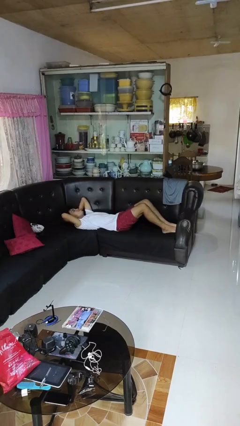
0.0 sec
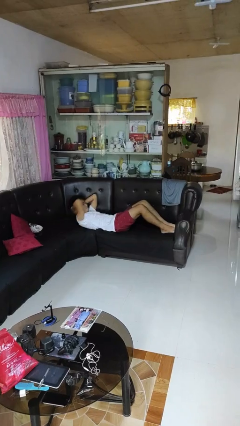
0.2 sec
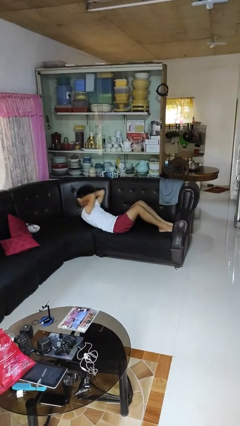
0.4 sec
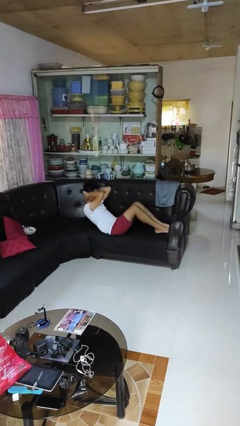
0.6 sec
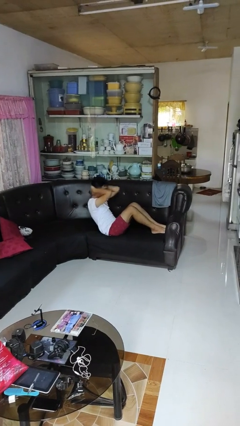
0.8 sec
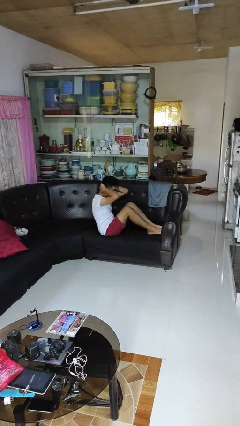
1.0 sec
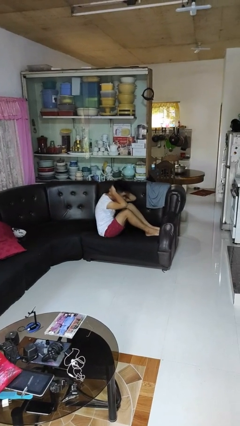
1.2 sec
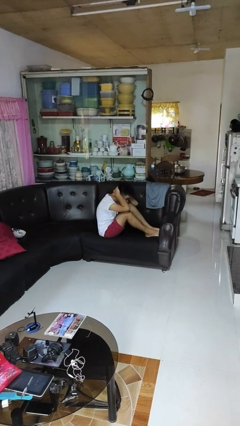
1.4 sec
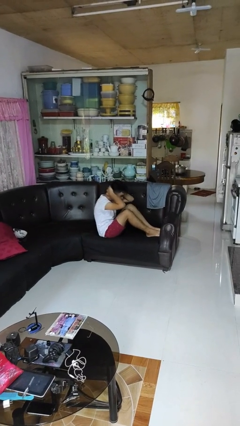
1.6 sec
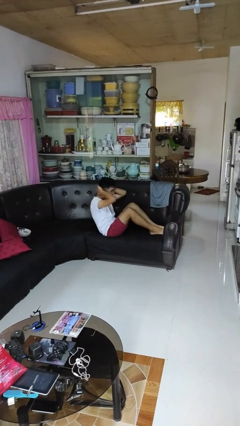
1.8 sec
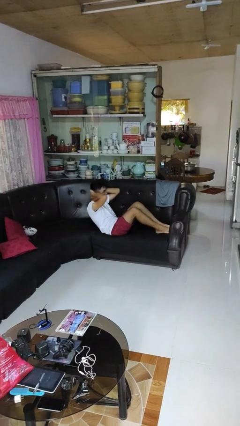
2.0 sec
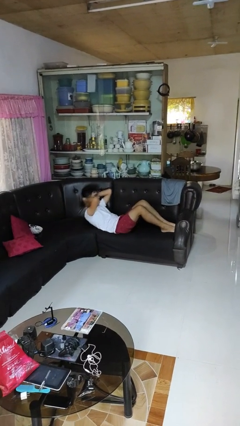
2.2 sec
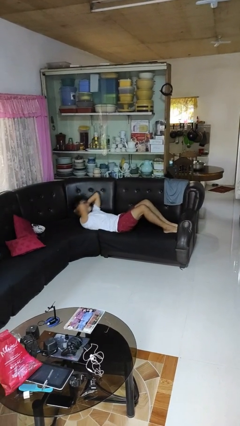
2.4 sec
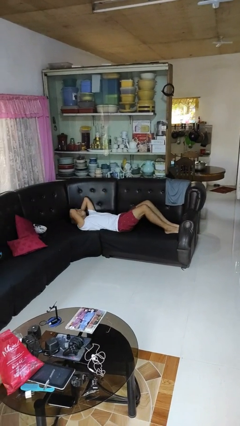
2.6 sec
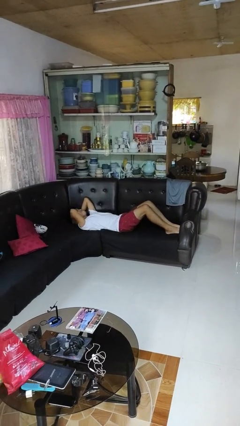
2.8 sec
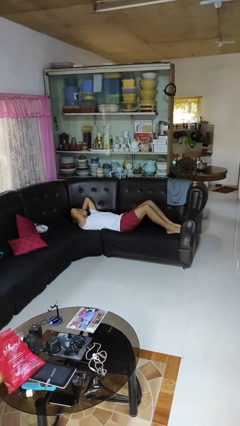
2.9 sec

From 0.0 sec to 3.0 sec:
person exercises with situp

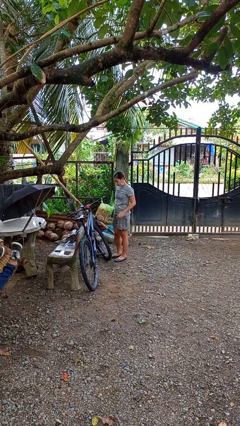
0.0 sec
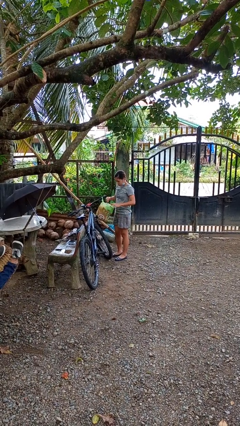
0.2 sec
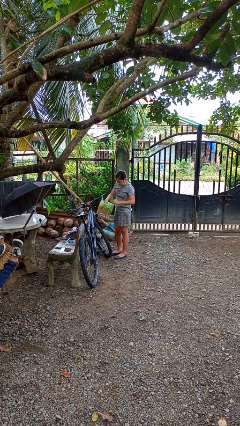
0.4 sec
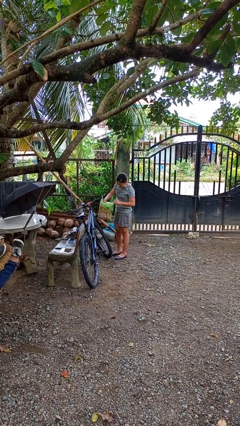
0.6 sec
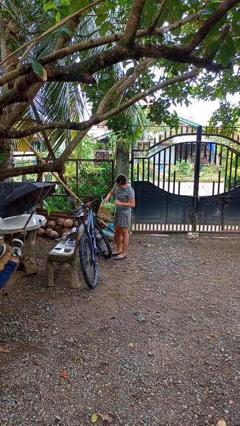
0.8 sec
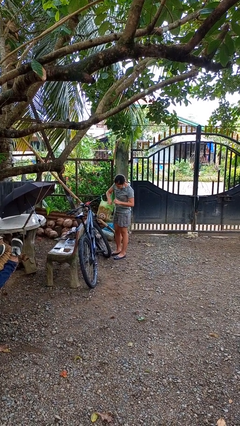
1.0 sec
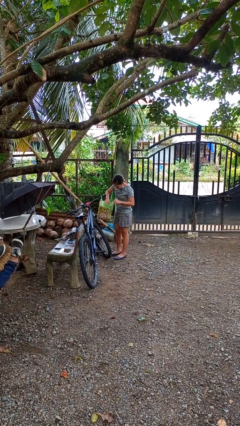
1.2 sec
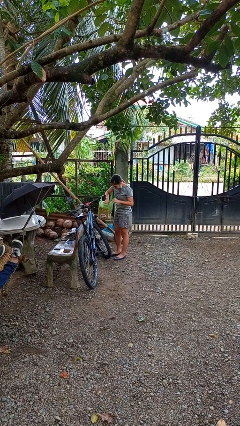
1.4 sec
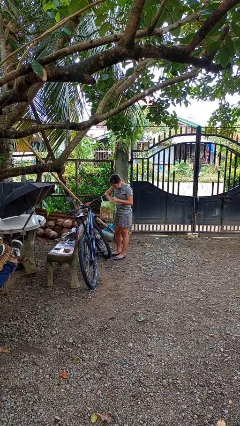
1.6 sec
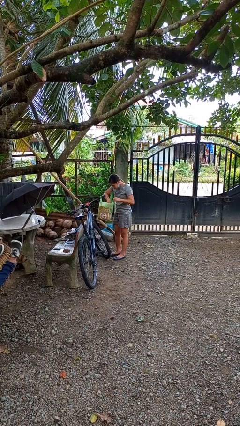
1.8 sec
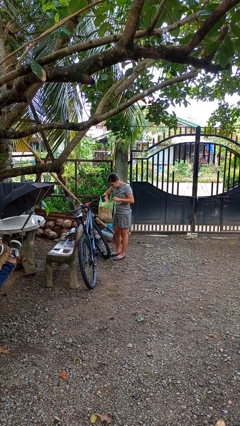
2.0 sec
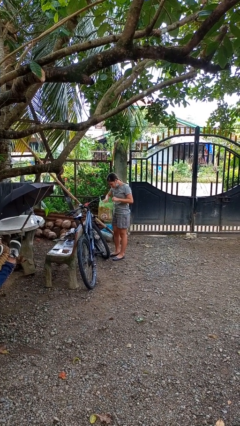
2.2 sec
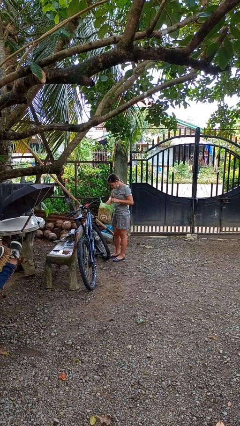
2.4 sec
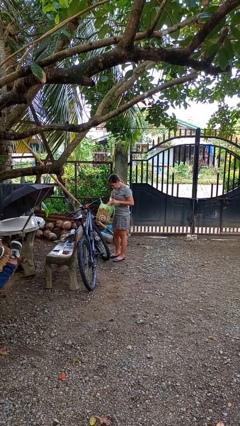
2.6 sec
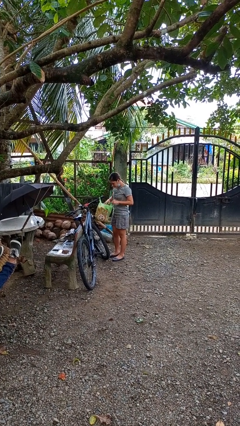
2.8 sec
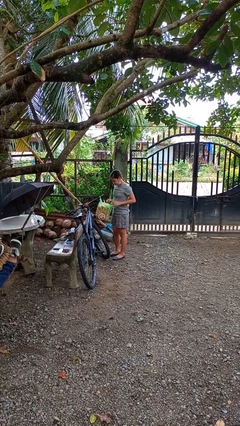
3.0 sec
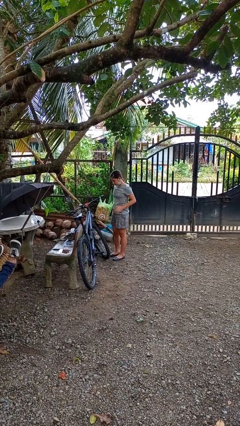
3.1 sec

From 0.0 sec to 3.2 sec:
person searches in bag

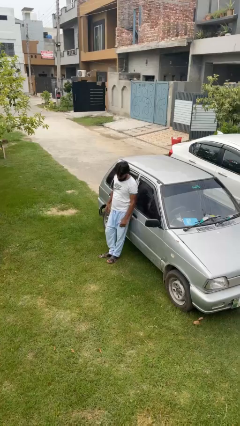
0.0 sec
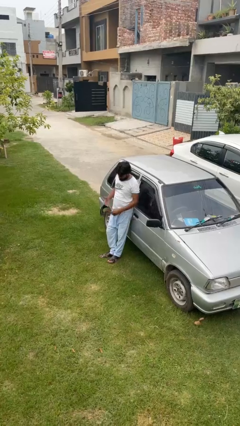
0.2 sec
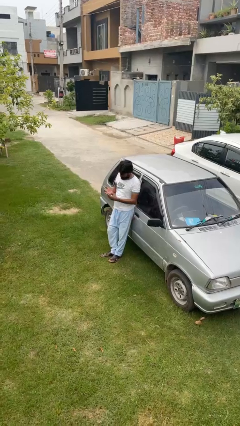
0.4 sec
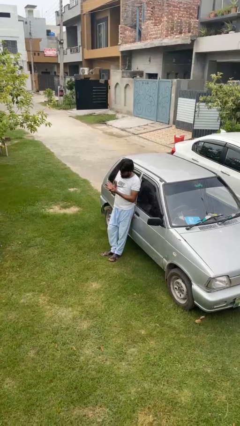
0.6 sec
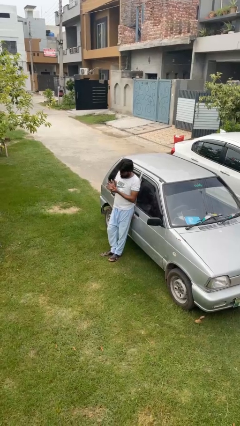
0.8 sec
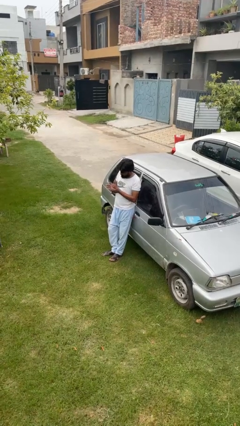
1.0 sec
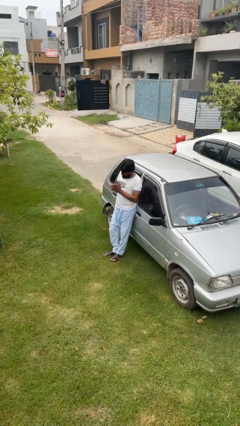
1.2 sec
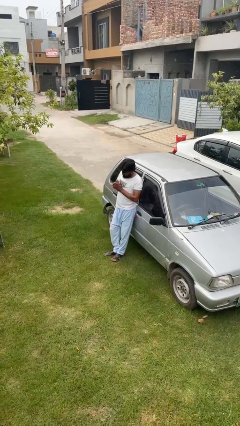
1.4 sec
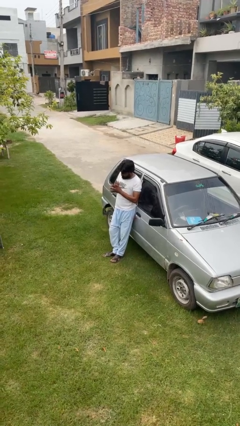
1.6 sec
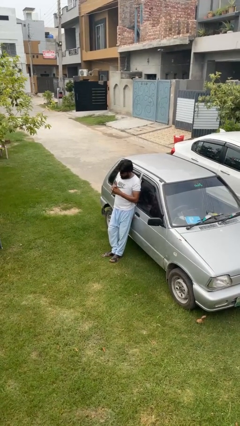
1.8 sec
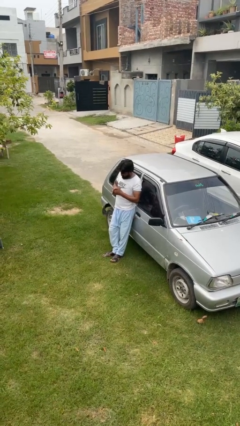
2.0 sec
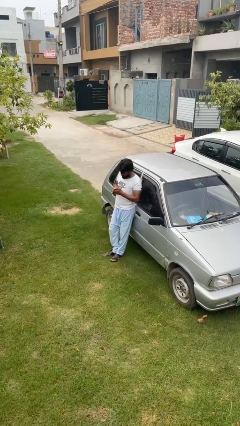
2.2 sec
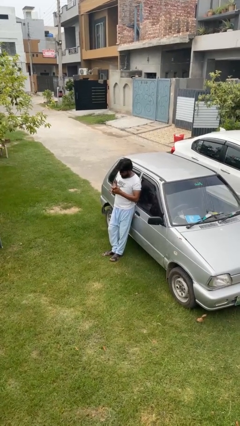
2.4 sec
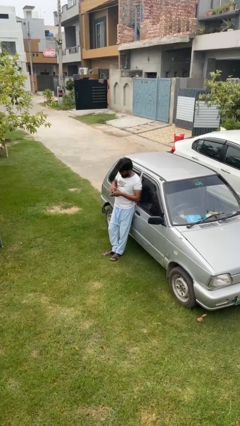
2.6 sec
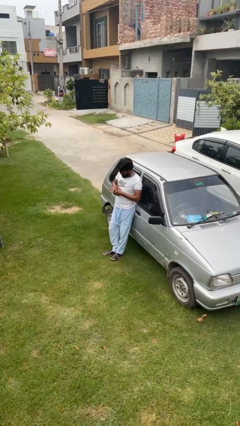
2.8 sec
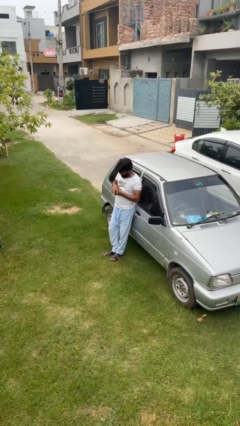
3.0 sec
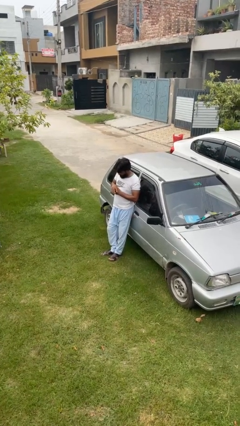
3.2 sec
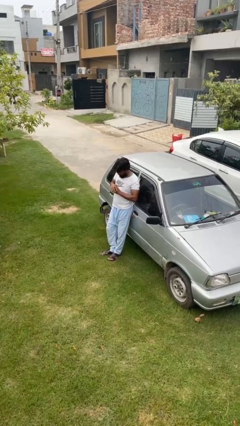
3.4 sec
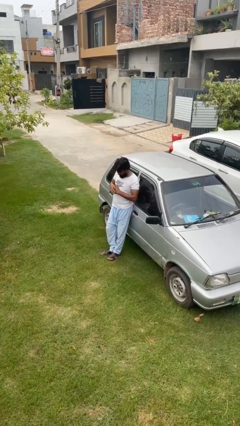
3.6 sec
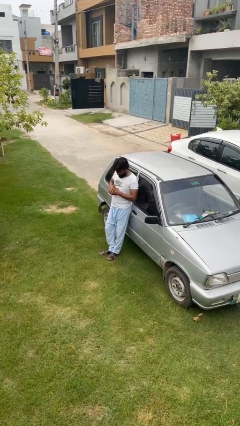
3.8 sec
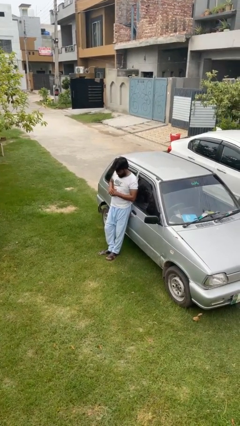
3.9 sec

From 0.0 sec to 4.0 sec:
person cracks knuckles

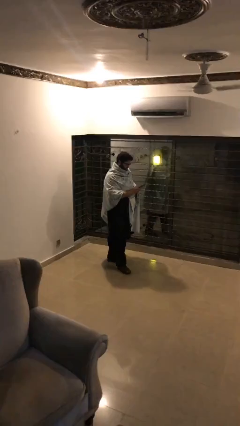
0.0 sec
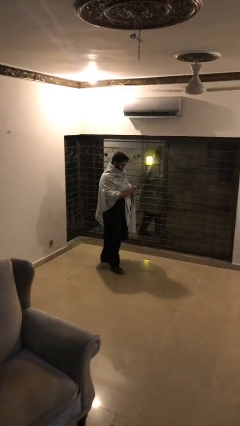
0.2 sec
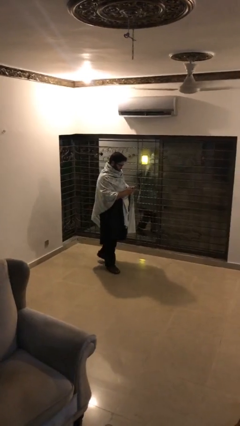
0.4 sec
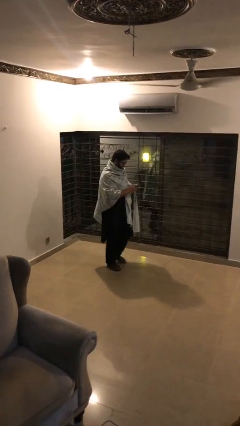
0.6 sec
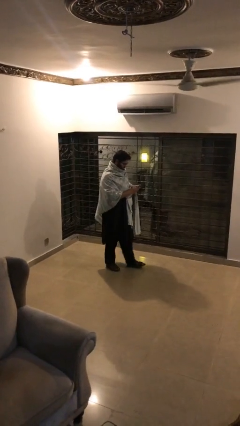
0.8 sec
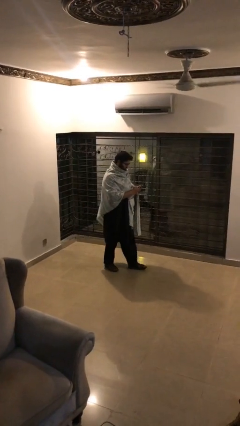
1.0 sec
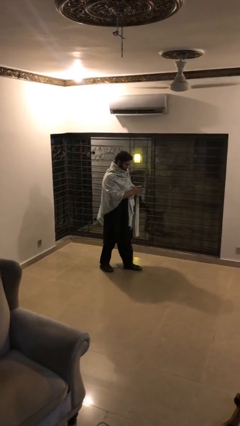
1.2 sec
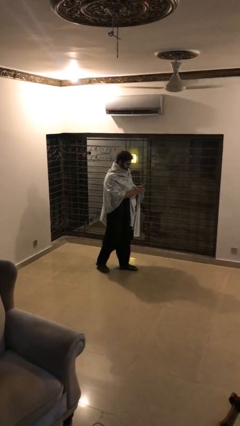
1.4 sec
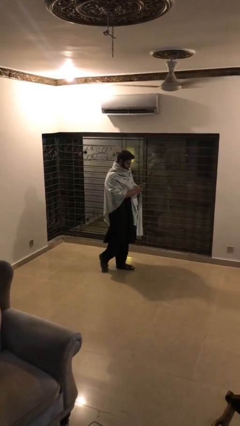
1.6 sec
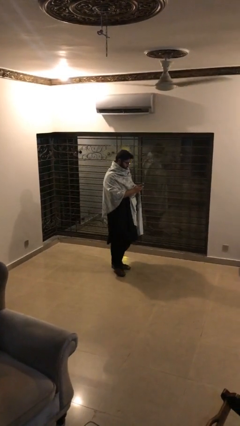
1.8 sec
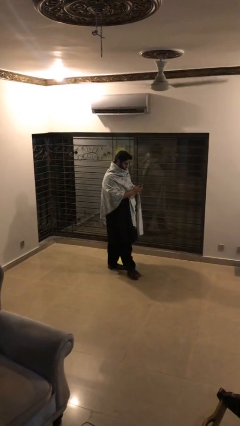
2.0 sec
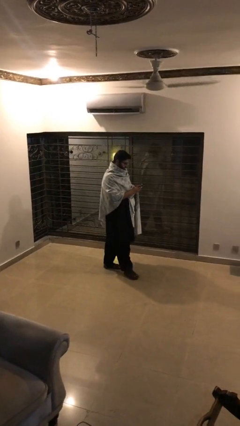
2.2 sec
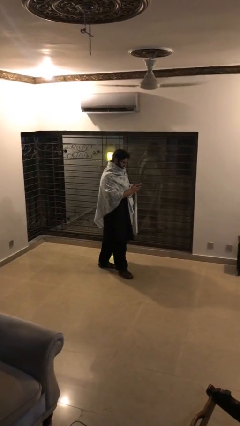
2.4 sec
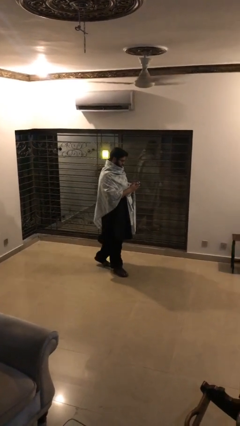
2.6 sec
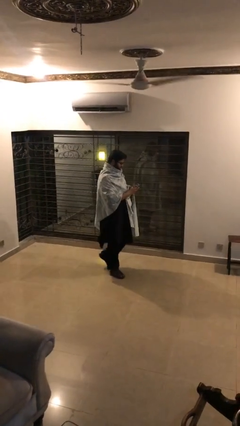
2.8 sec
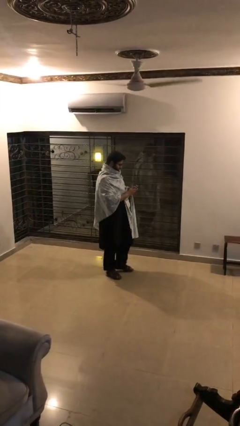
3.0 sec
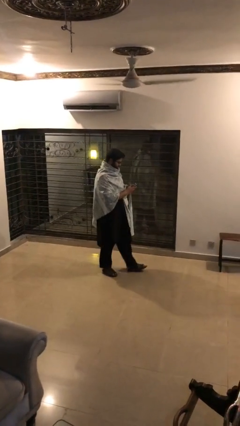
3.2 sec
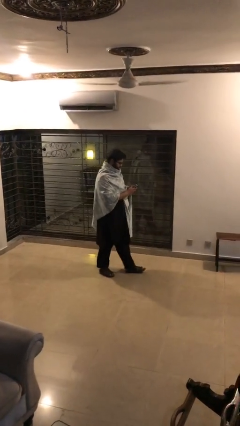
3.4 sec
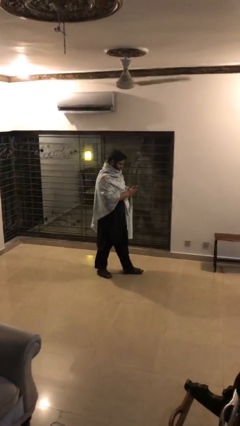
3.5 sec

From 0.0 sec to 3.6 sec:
person texts on phone

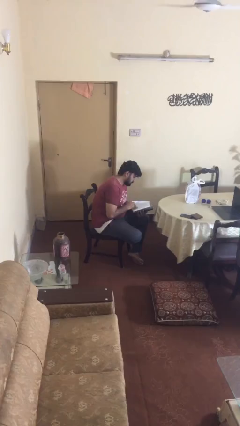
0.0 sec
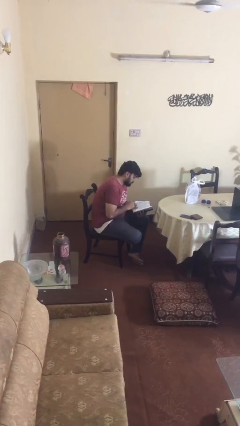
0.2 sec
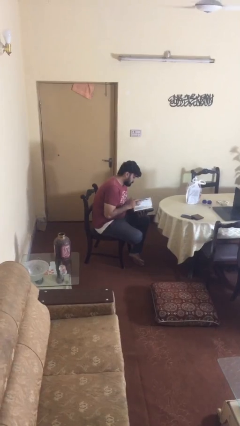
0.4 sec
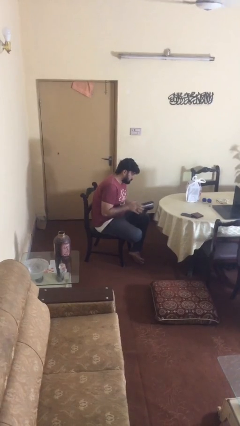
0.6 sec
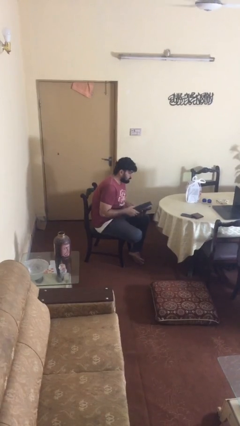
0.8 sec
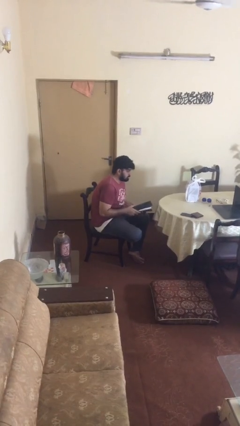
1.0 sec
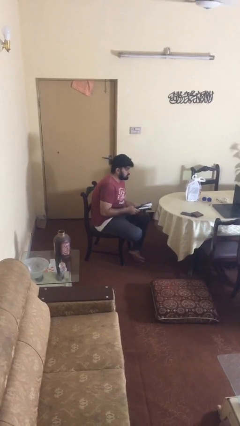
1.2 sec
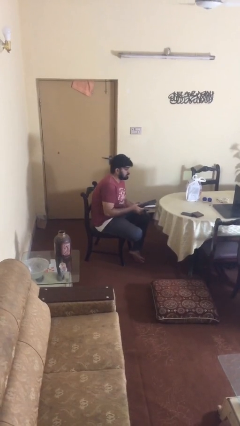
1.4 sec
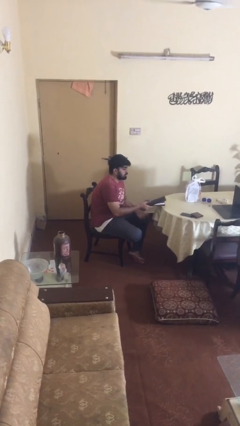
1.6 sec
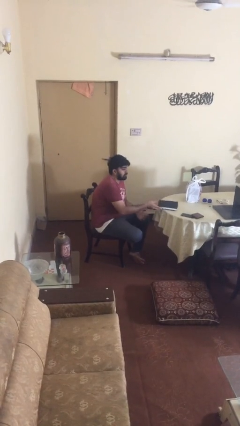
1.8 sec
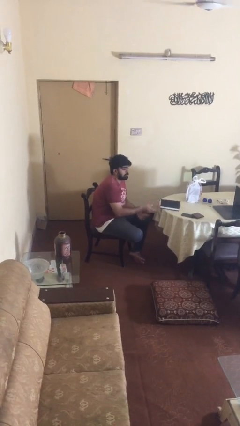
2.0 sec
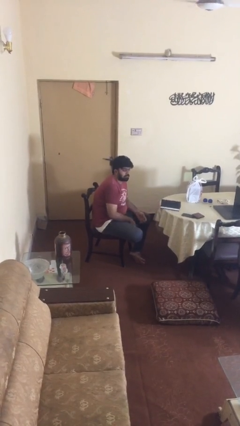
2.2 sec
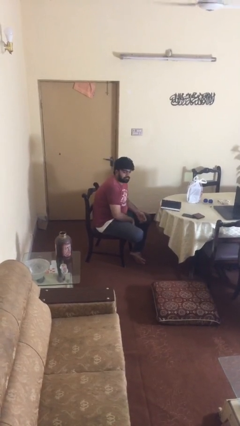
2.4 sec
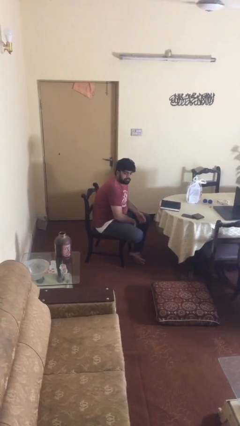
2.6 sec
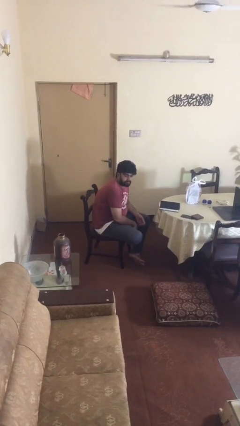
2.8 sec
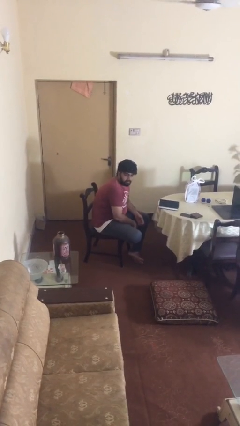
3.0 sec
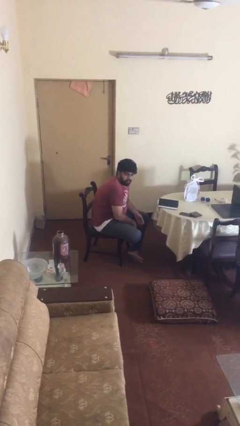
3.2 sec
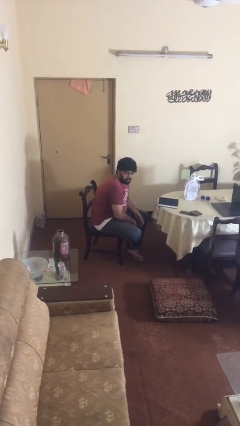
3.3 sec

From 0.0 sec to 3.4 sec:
person puts down object on table

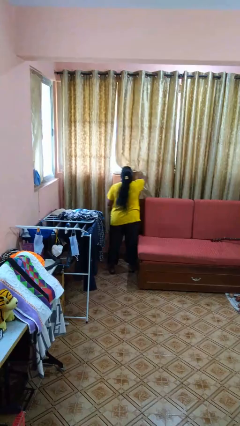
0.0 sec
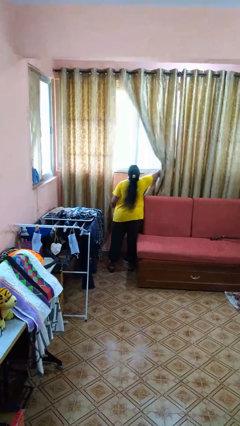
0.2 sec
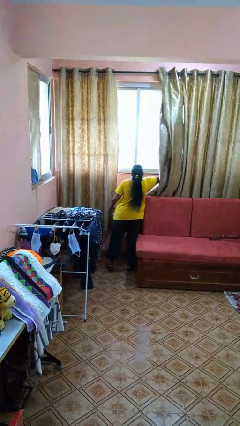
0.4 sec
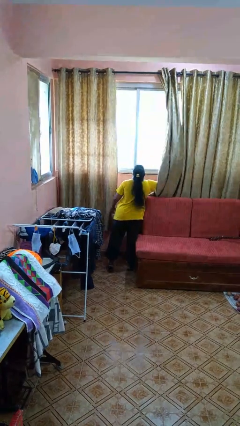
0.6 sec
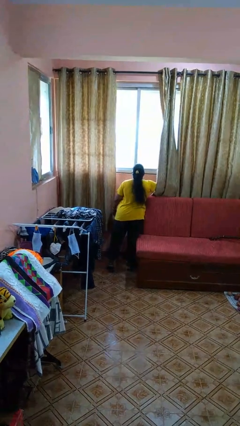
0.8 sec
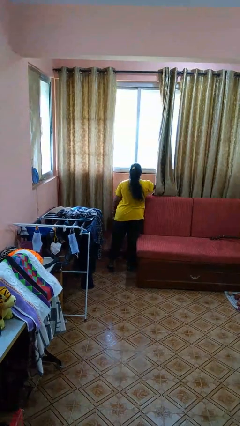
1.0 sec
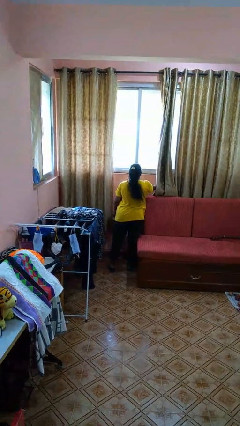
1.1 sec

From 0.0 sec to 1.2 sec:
person opens curtains
